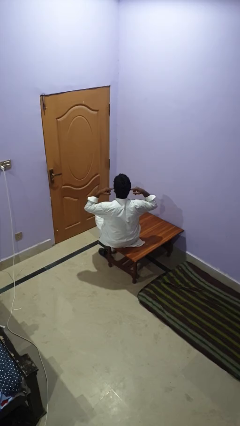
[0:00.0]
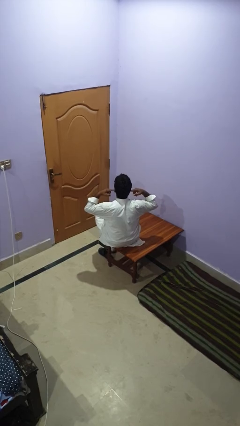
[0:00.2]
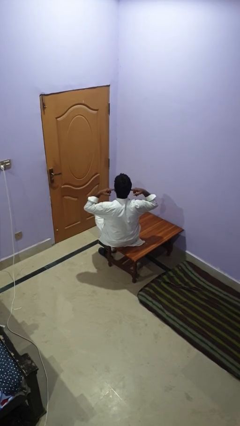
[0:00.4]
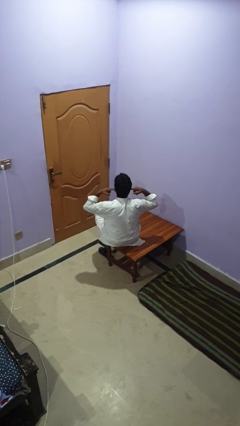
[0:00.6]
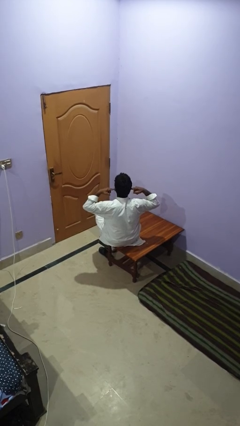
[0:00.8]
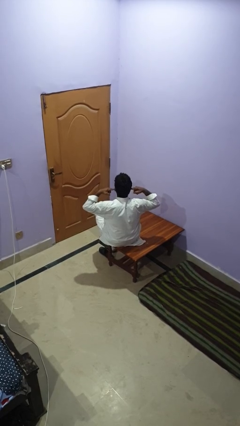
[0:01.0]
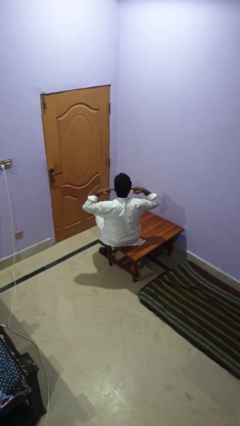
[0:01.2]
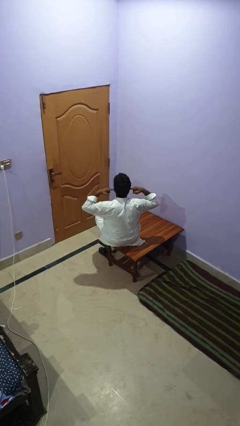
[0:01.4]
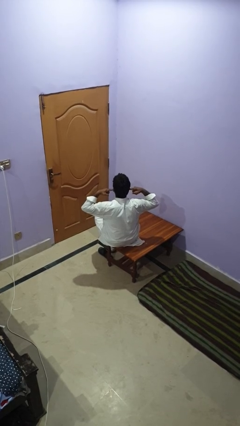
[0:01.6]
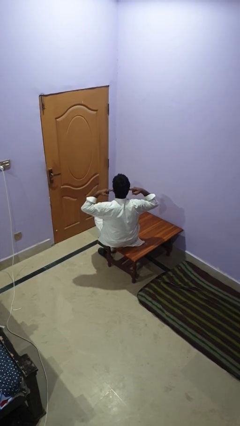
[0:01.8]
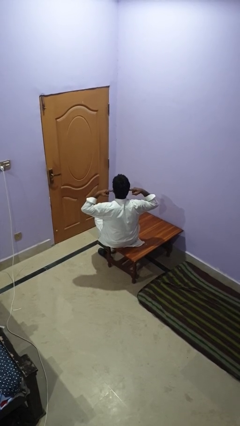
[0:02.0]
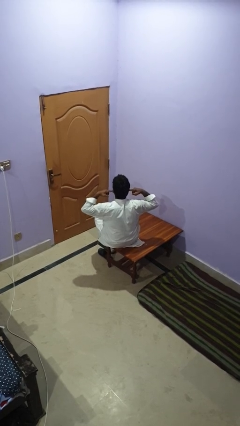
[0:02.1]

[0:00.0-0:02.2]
person puts fingers in ear

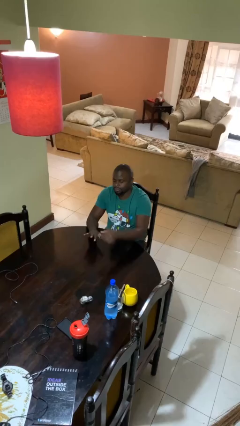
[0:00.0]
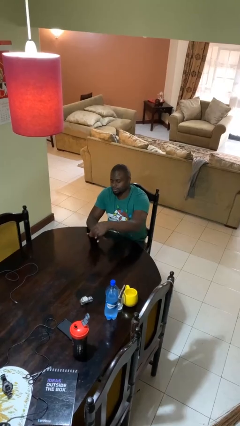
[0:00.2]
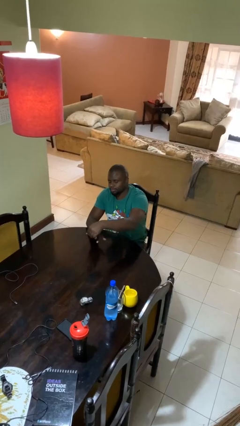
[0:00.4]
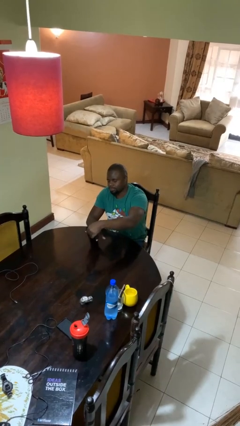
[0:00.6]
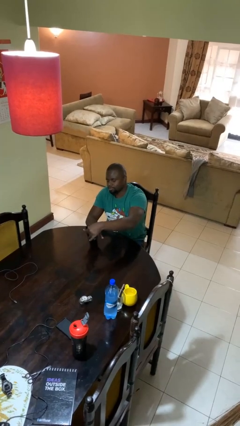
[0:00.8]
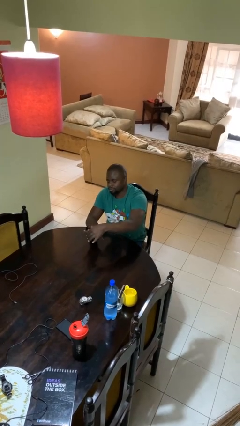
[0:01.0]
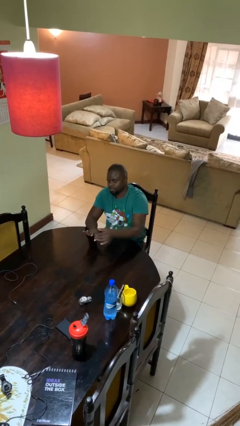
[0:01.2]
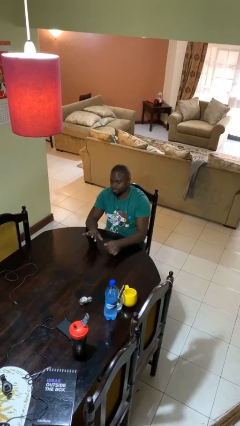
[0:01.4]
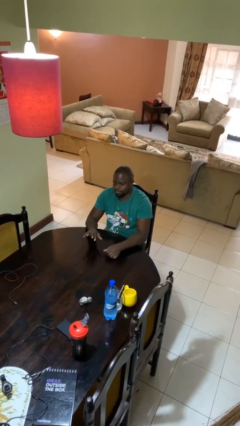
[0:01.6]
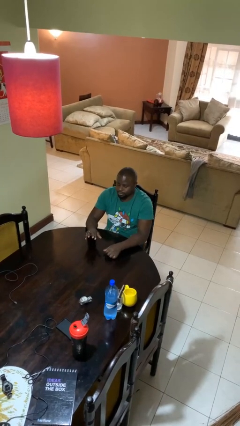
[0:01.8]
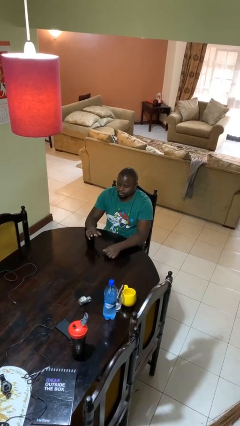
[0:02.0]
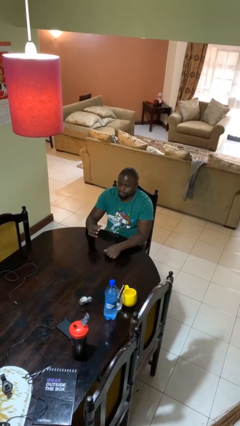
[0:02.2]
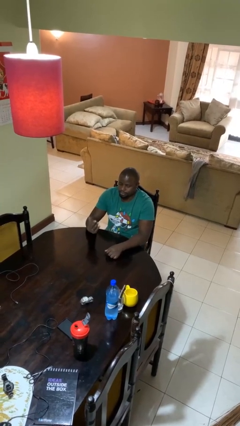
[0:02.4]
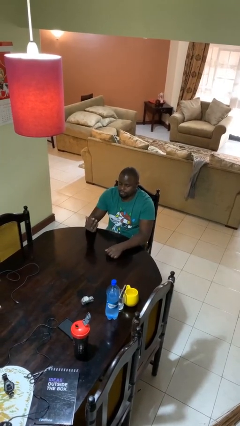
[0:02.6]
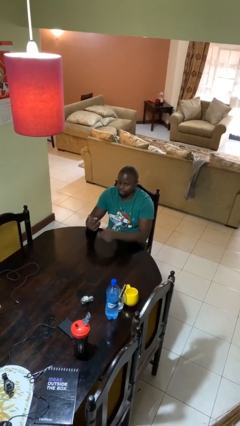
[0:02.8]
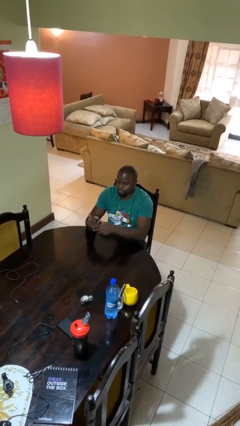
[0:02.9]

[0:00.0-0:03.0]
person puts on ring

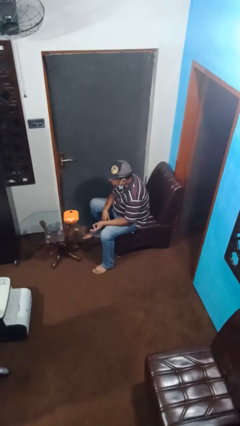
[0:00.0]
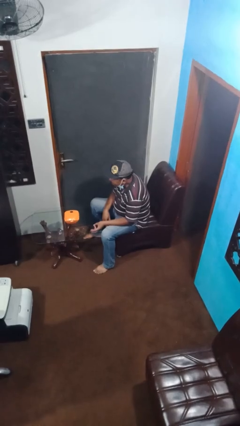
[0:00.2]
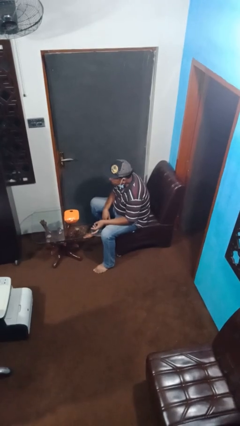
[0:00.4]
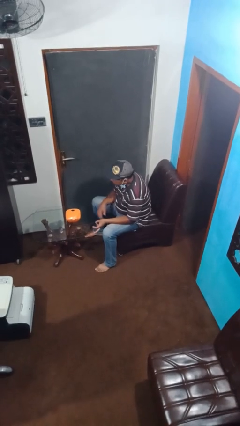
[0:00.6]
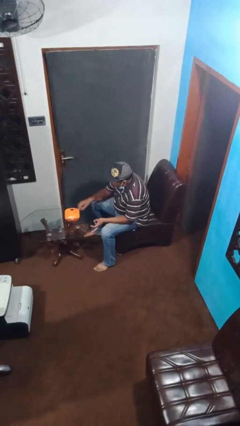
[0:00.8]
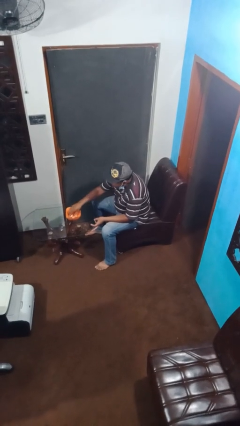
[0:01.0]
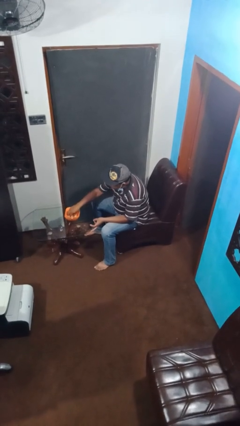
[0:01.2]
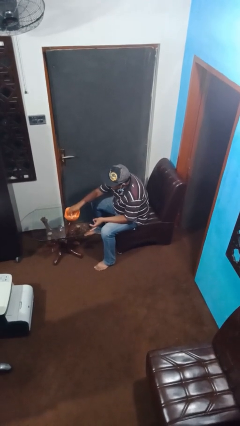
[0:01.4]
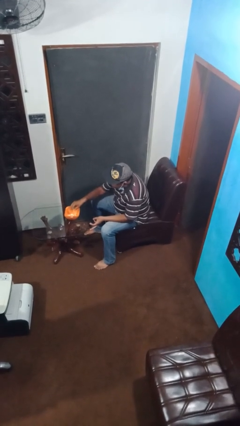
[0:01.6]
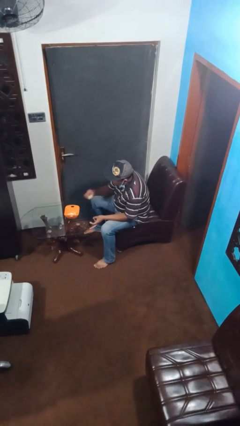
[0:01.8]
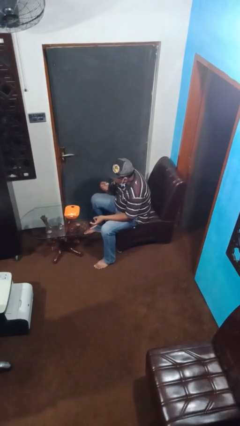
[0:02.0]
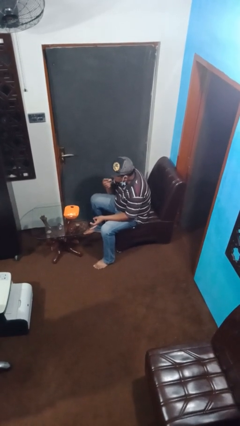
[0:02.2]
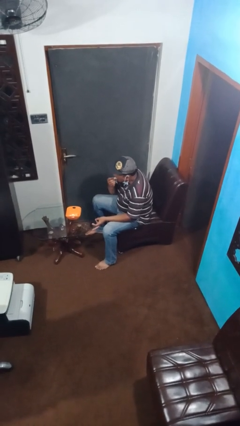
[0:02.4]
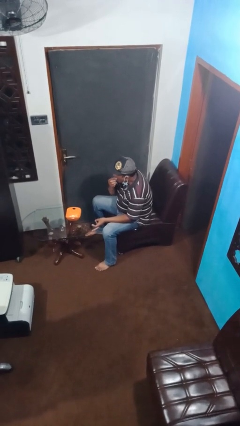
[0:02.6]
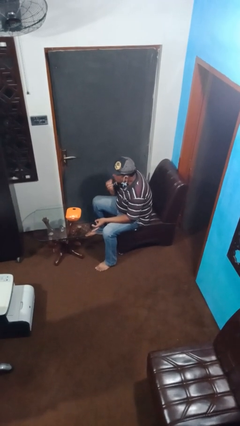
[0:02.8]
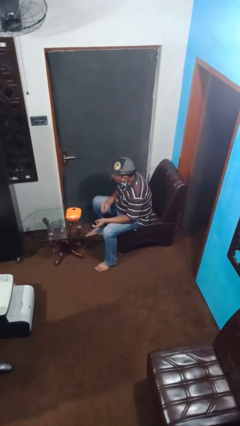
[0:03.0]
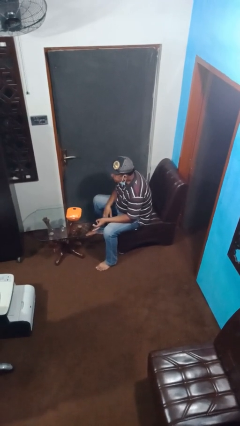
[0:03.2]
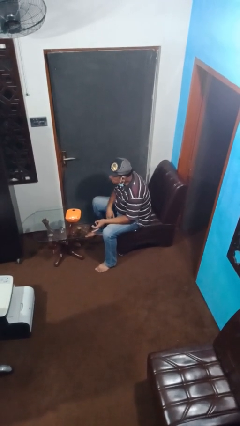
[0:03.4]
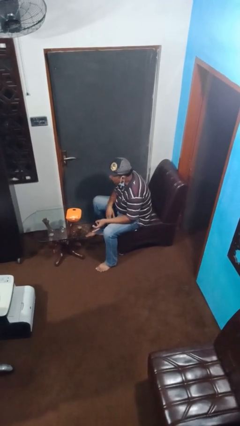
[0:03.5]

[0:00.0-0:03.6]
person eats with hands

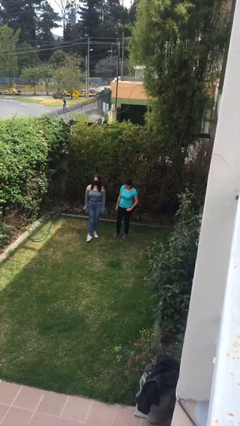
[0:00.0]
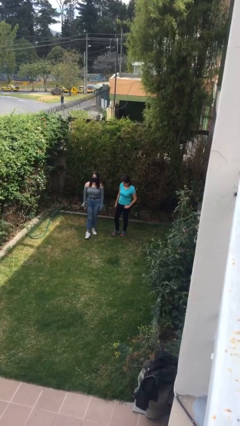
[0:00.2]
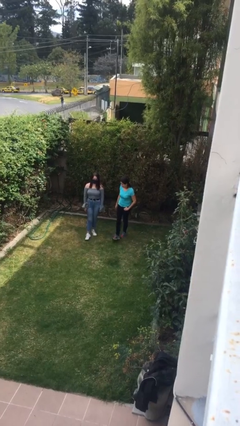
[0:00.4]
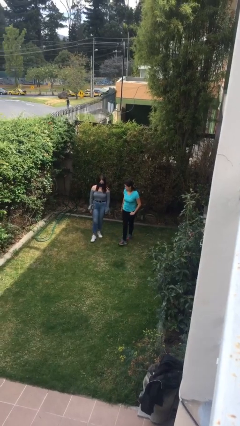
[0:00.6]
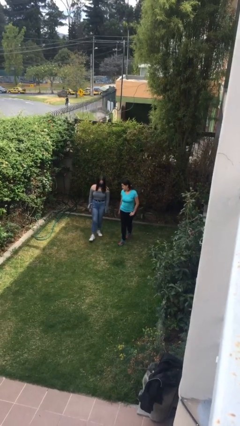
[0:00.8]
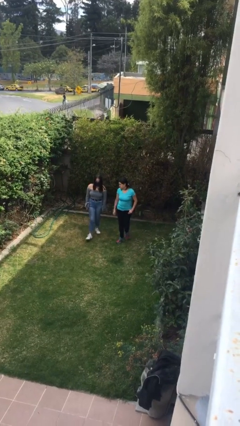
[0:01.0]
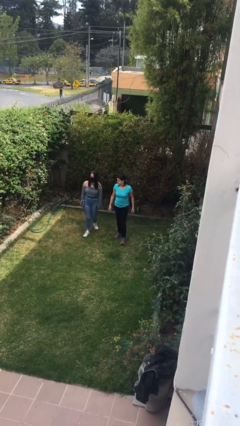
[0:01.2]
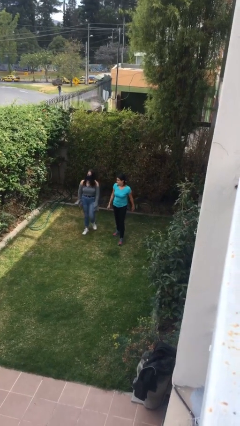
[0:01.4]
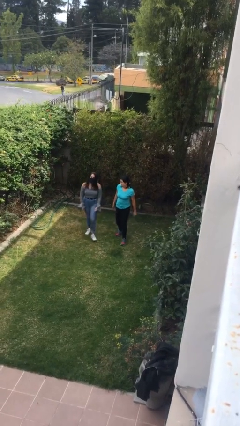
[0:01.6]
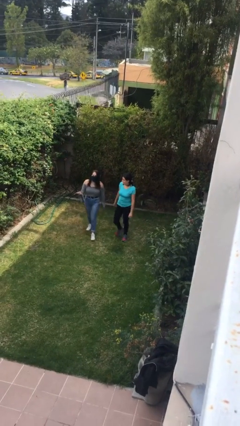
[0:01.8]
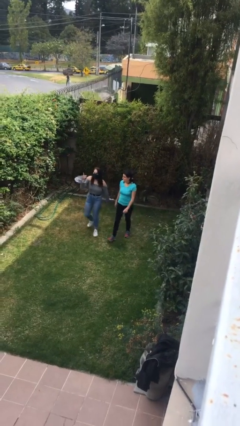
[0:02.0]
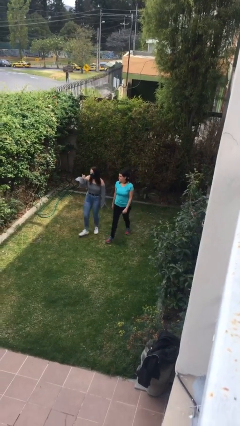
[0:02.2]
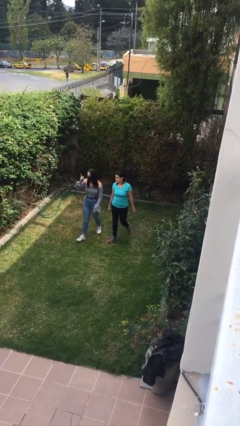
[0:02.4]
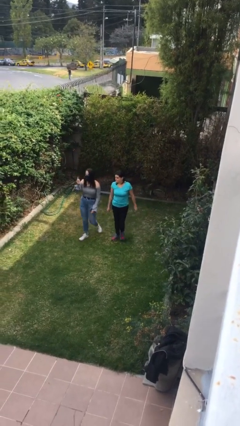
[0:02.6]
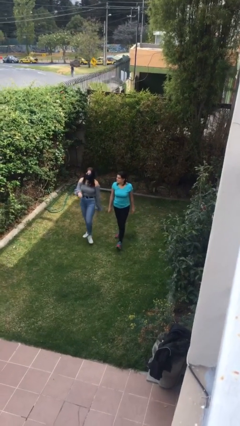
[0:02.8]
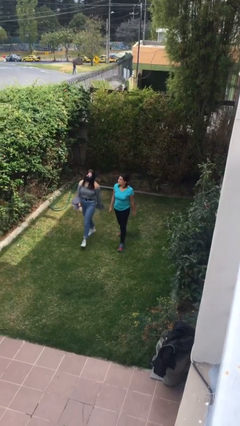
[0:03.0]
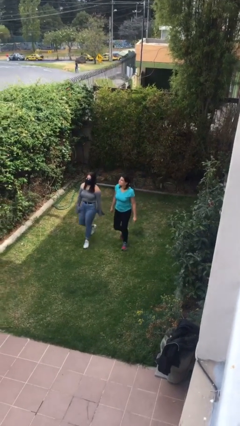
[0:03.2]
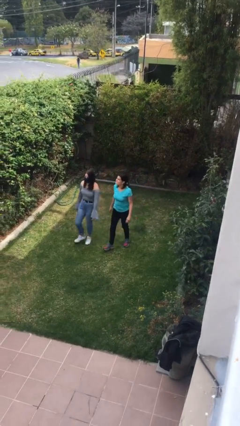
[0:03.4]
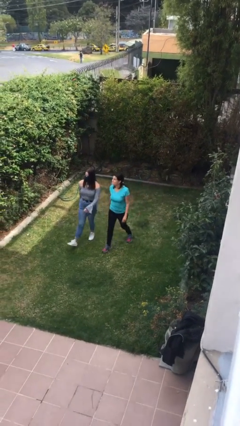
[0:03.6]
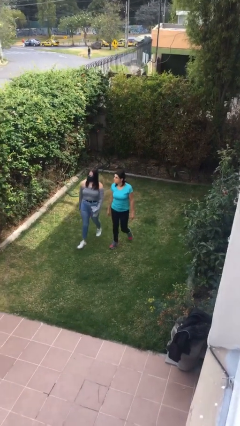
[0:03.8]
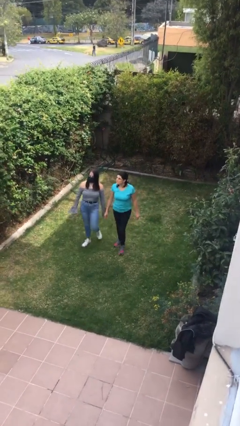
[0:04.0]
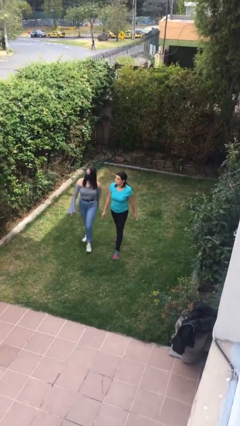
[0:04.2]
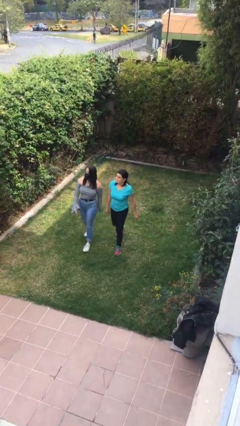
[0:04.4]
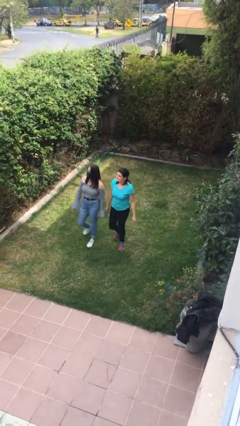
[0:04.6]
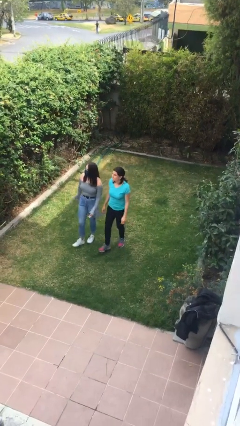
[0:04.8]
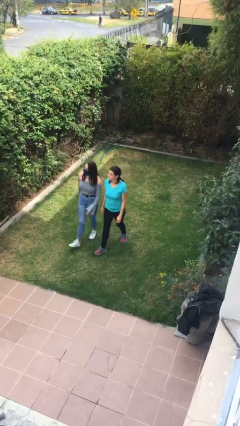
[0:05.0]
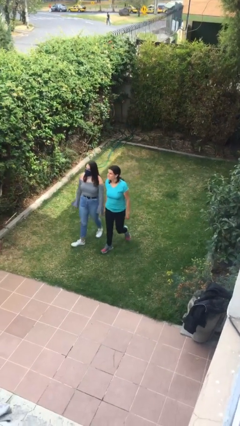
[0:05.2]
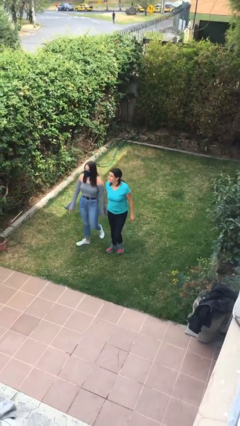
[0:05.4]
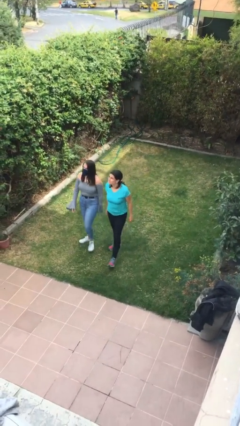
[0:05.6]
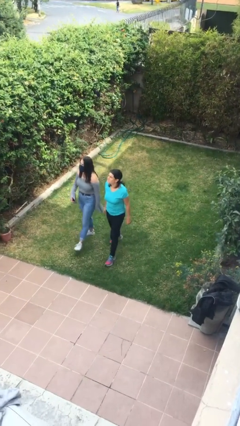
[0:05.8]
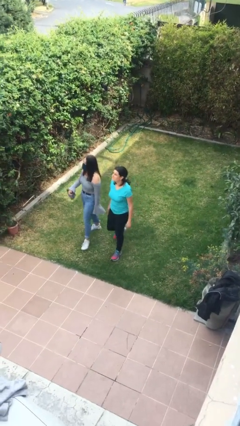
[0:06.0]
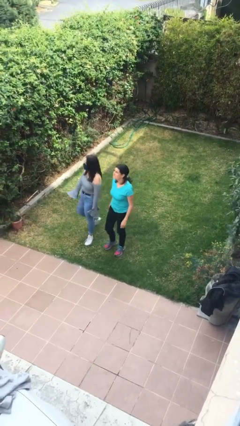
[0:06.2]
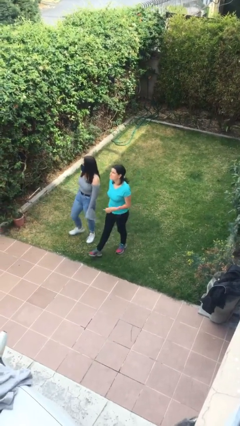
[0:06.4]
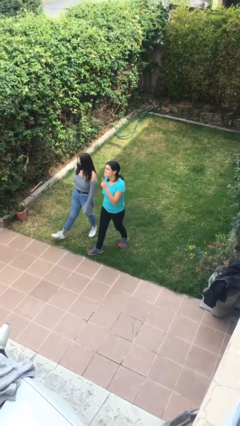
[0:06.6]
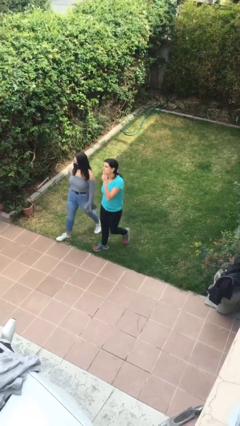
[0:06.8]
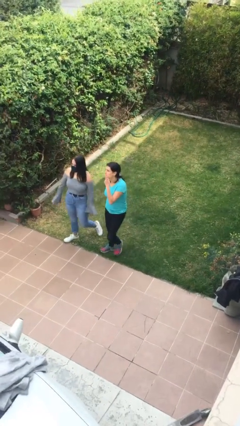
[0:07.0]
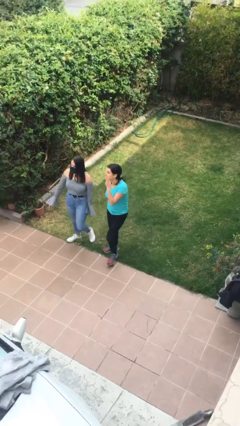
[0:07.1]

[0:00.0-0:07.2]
person talks to person

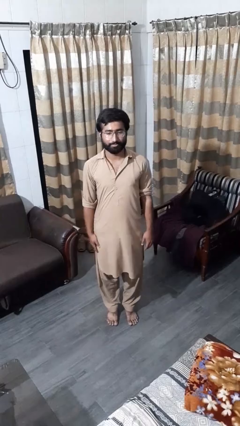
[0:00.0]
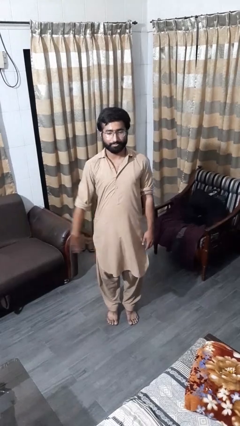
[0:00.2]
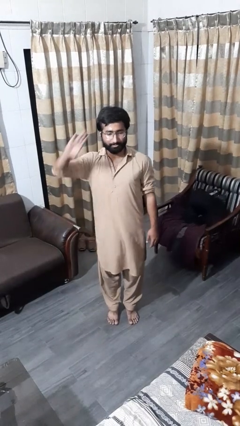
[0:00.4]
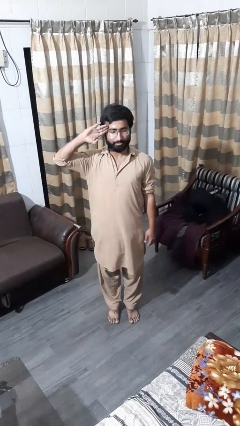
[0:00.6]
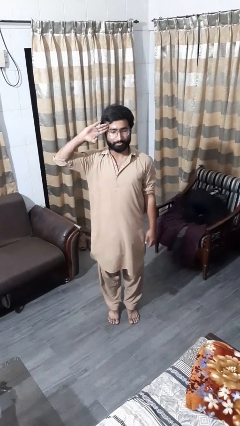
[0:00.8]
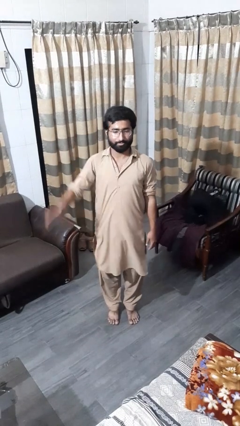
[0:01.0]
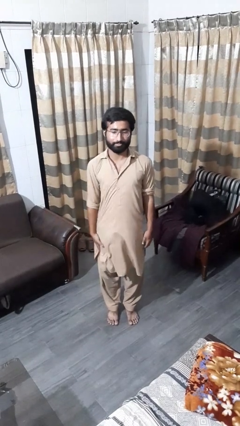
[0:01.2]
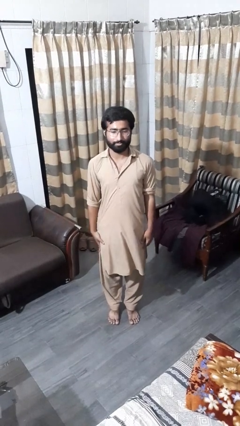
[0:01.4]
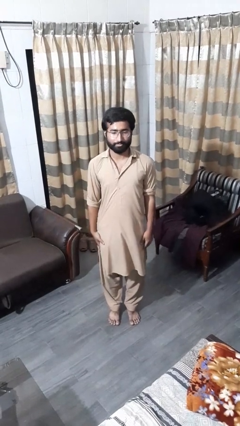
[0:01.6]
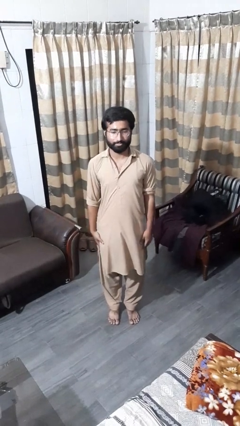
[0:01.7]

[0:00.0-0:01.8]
person salutes
